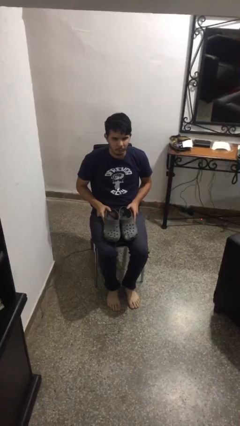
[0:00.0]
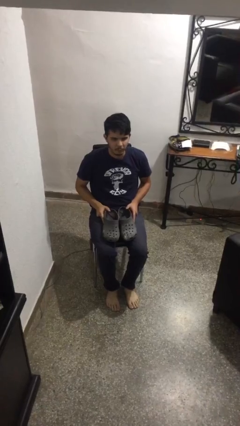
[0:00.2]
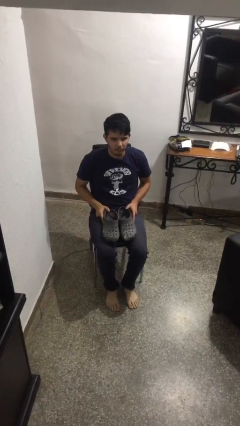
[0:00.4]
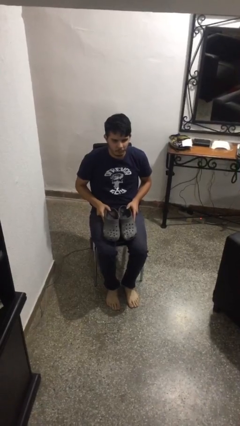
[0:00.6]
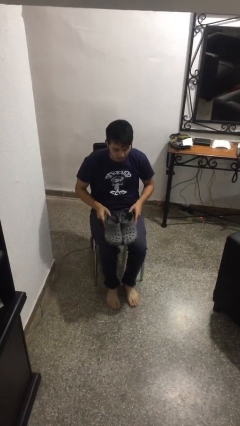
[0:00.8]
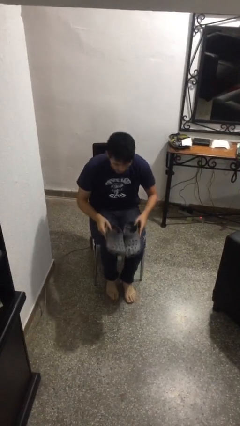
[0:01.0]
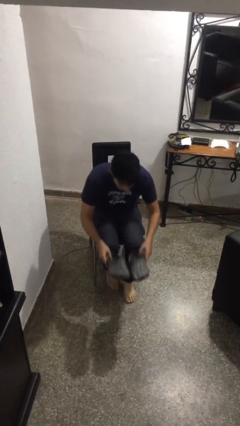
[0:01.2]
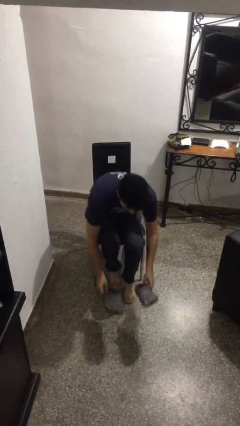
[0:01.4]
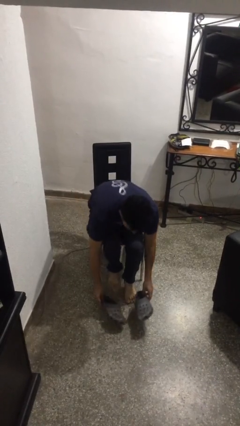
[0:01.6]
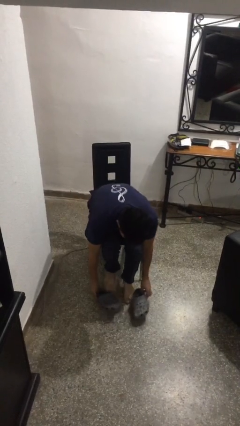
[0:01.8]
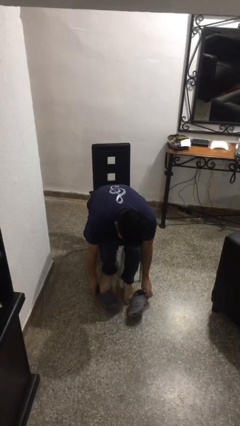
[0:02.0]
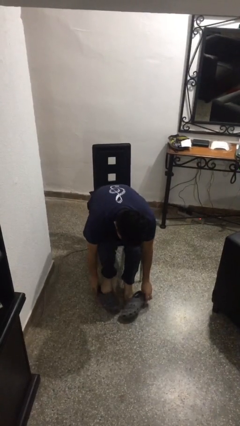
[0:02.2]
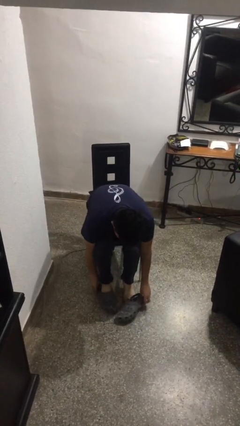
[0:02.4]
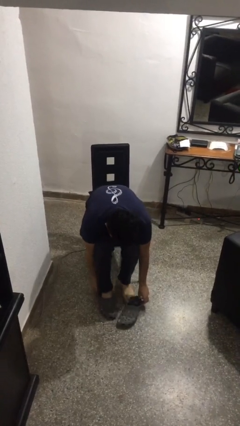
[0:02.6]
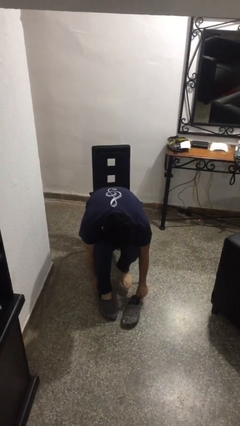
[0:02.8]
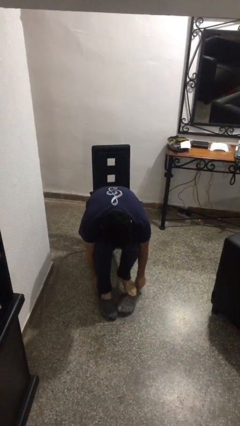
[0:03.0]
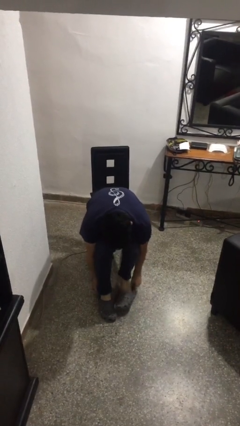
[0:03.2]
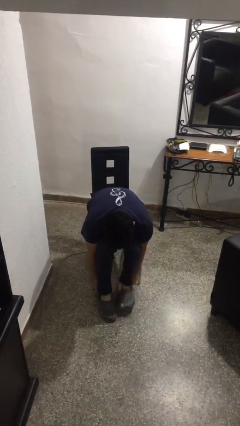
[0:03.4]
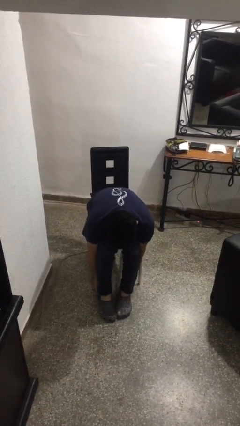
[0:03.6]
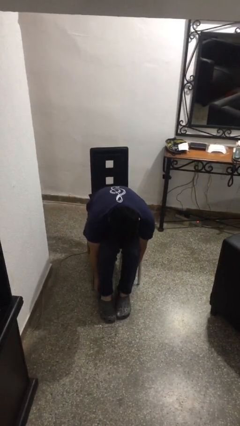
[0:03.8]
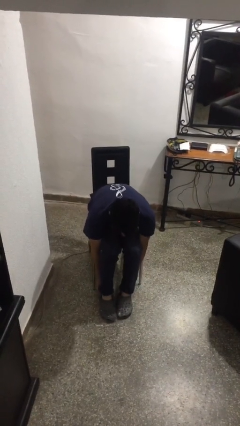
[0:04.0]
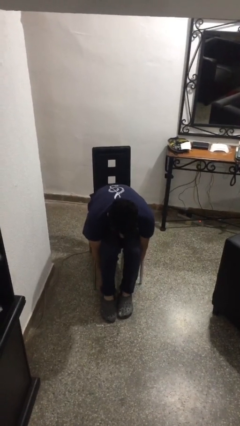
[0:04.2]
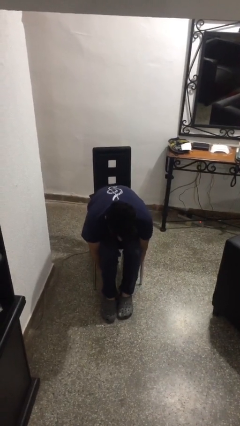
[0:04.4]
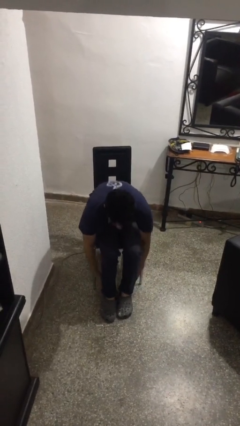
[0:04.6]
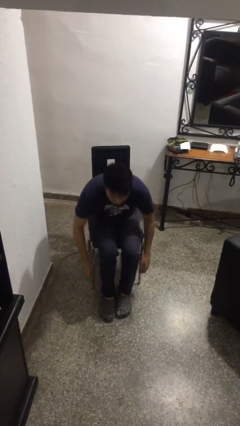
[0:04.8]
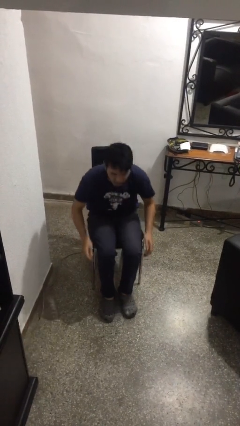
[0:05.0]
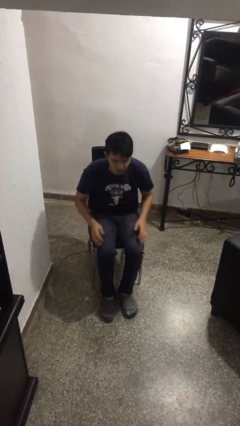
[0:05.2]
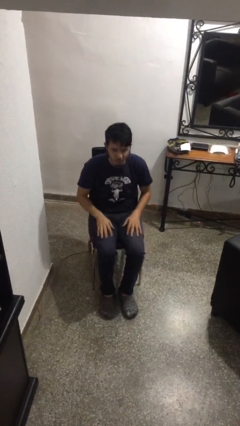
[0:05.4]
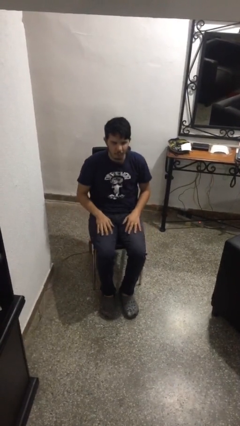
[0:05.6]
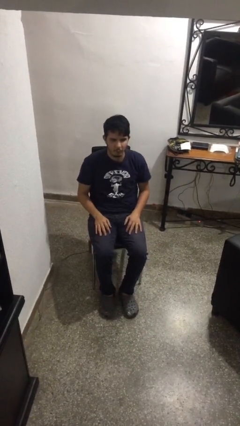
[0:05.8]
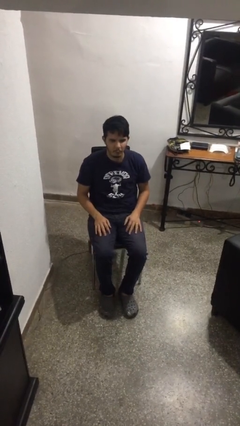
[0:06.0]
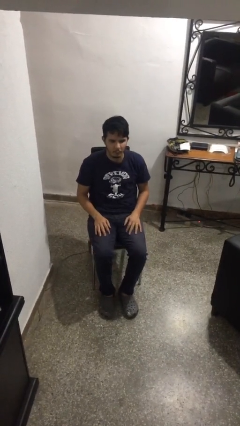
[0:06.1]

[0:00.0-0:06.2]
person puts on shoes

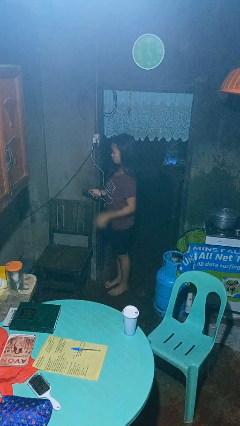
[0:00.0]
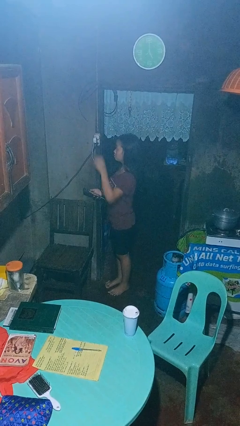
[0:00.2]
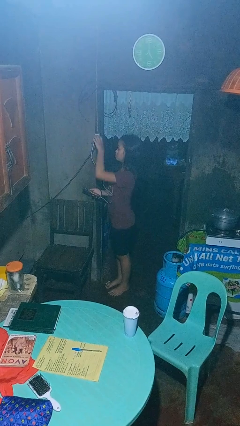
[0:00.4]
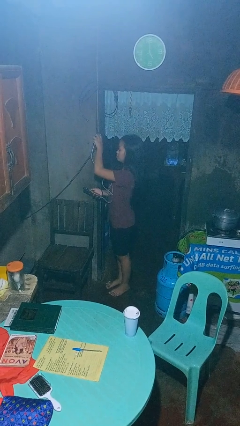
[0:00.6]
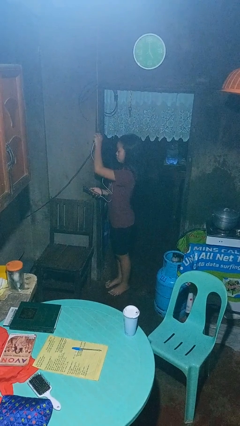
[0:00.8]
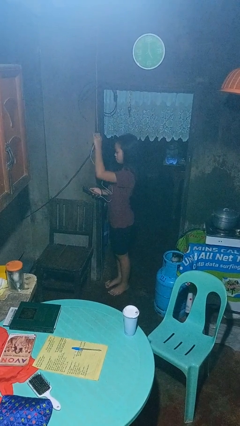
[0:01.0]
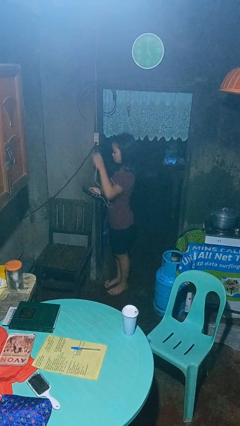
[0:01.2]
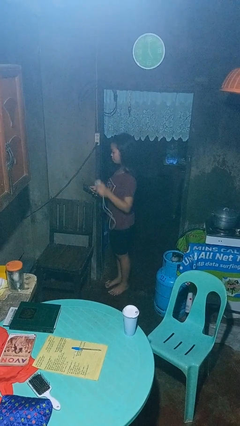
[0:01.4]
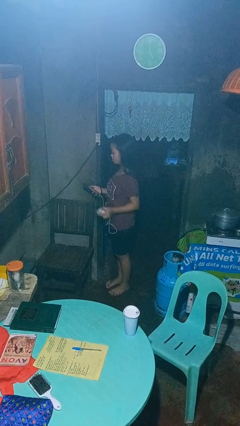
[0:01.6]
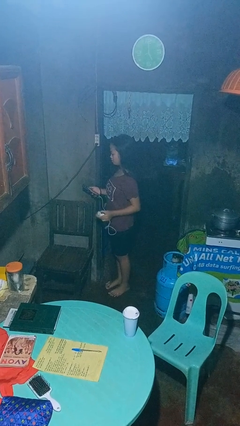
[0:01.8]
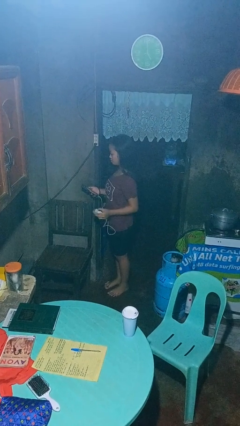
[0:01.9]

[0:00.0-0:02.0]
person unplugs from electrical socket

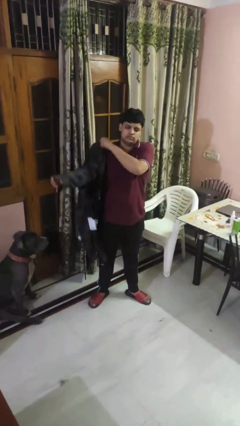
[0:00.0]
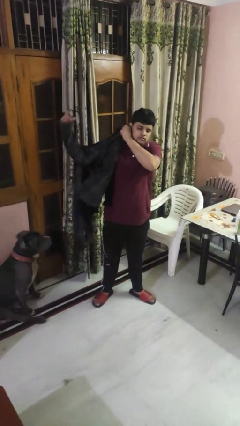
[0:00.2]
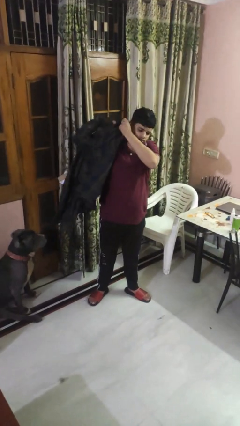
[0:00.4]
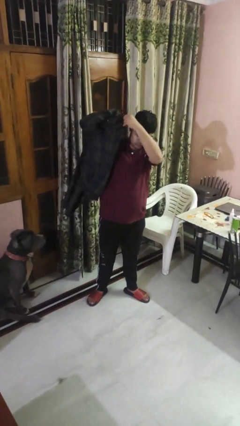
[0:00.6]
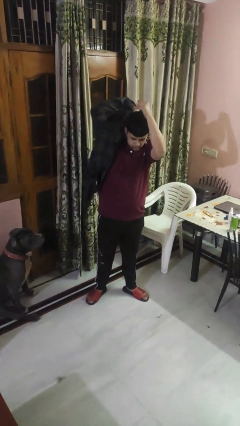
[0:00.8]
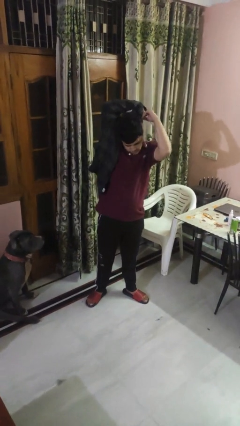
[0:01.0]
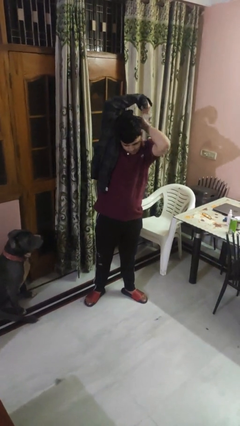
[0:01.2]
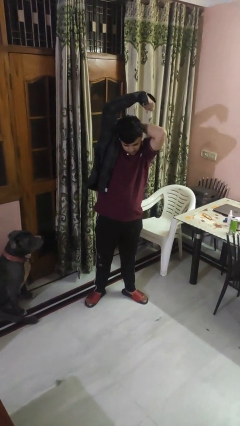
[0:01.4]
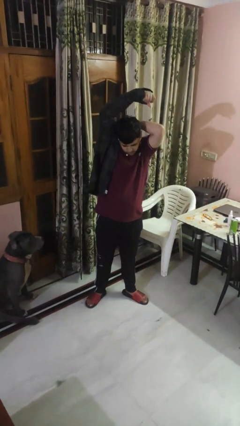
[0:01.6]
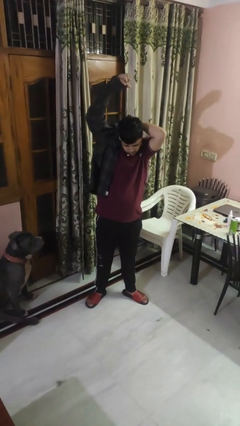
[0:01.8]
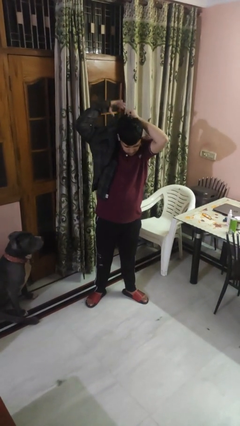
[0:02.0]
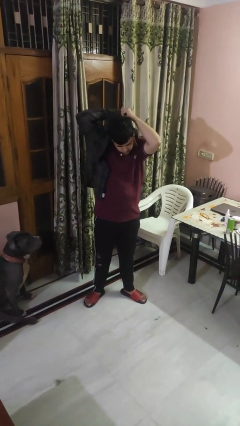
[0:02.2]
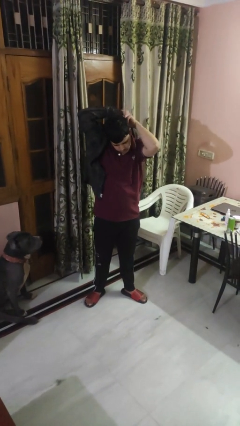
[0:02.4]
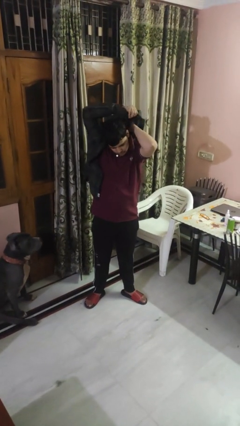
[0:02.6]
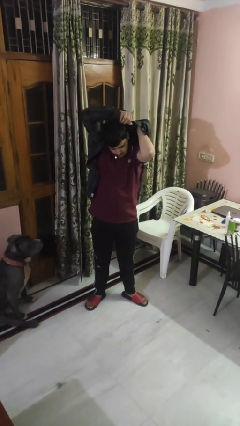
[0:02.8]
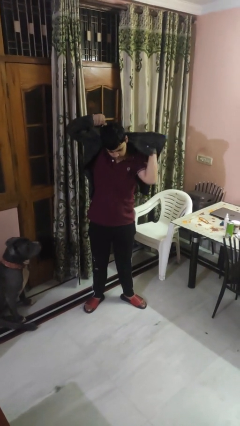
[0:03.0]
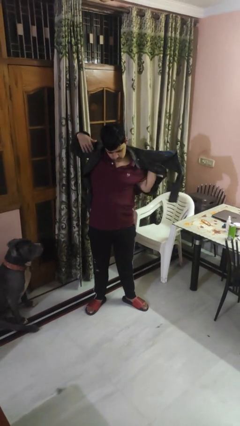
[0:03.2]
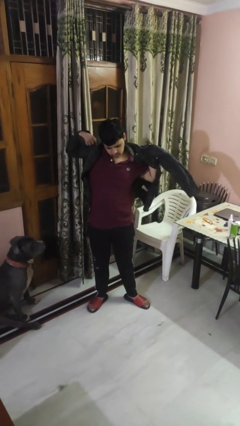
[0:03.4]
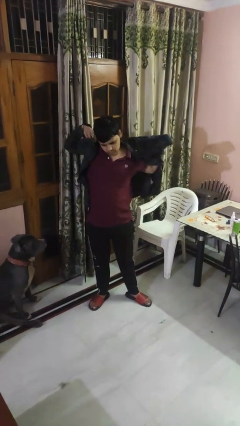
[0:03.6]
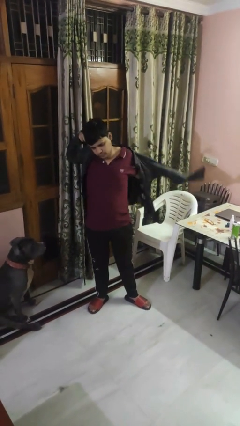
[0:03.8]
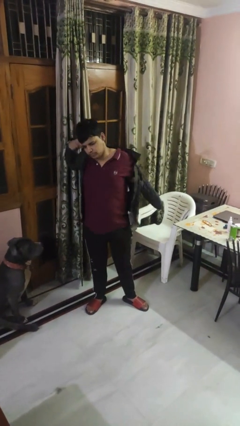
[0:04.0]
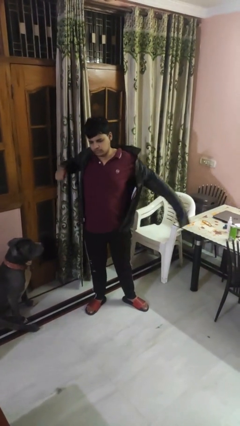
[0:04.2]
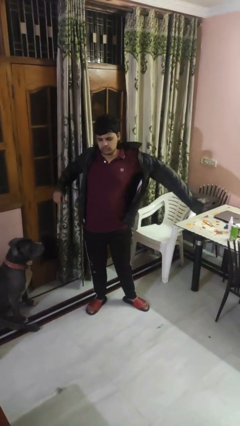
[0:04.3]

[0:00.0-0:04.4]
person puts on shirt

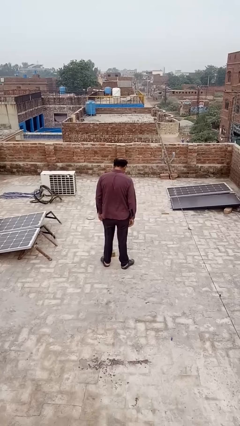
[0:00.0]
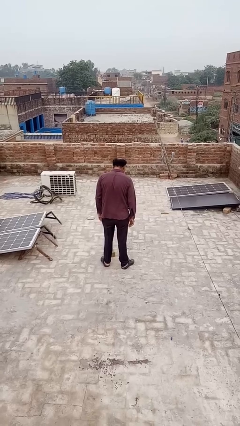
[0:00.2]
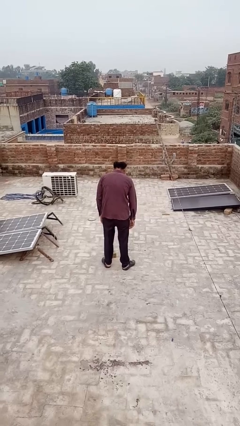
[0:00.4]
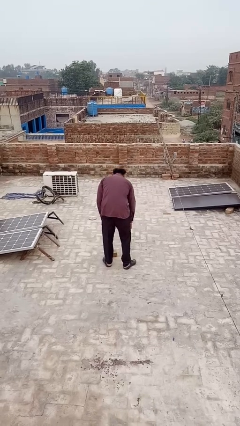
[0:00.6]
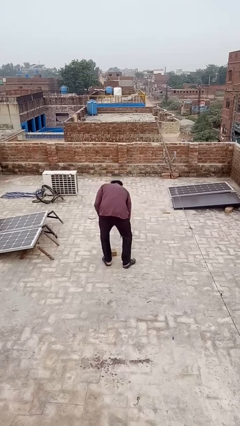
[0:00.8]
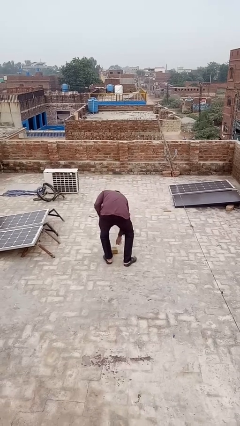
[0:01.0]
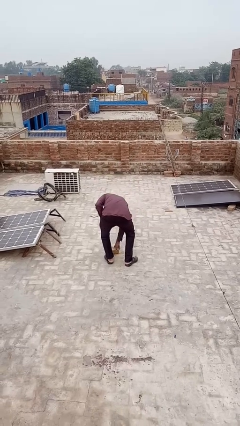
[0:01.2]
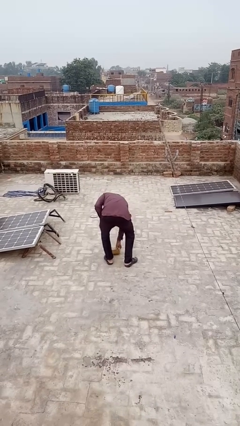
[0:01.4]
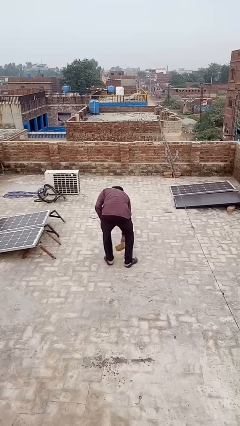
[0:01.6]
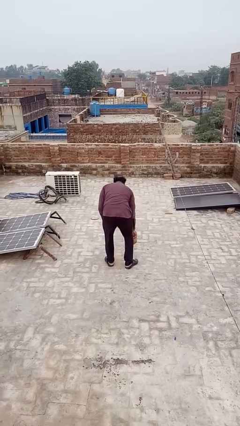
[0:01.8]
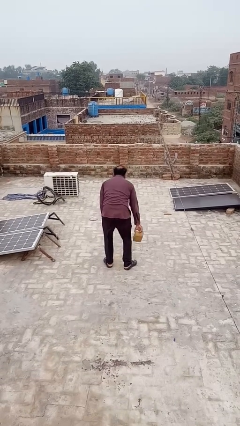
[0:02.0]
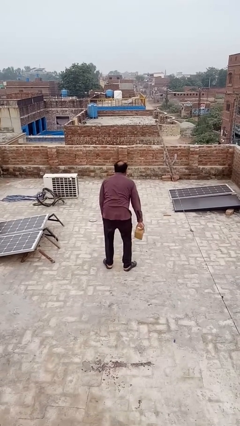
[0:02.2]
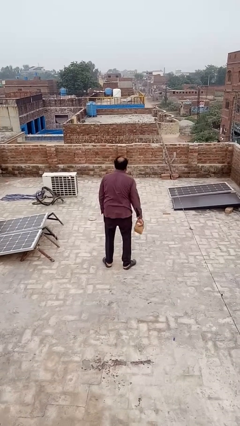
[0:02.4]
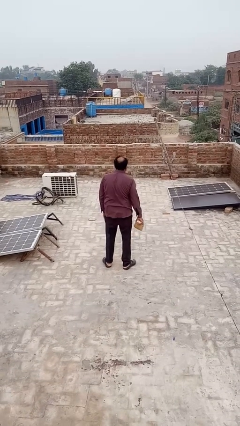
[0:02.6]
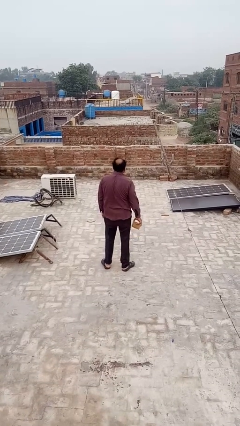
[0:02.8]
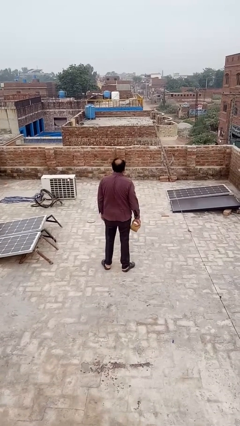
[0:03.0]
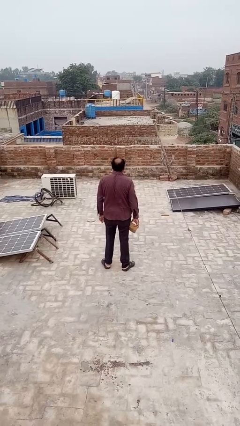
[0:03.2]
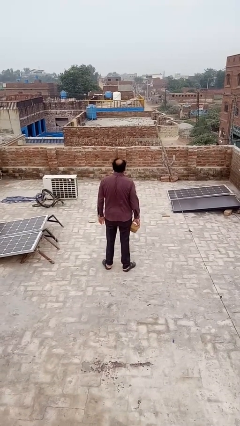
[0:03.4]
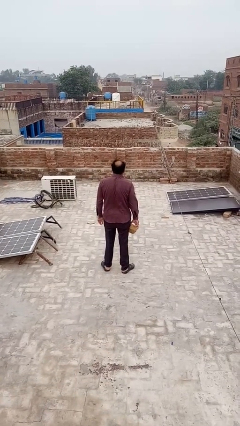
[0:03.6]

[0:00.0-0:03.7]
person picks up object from floor

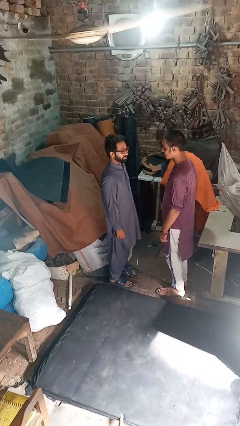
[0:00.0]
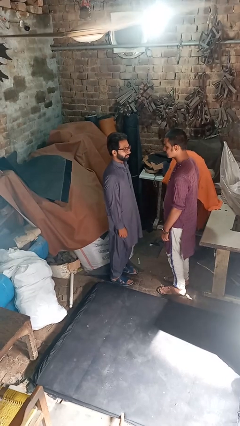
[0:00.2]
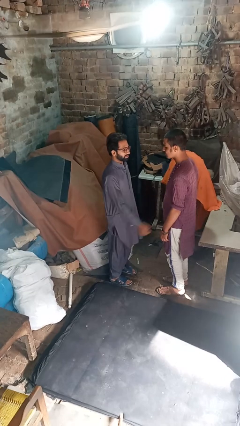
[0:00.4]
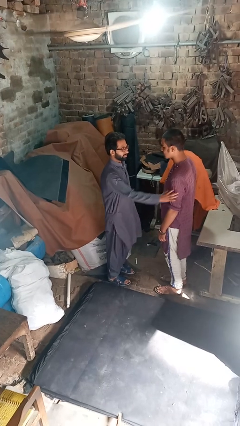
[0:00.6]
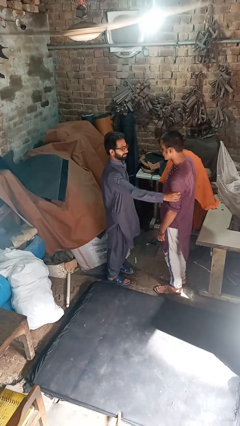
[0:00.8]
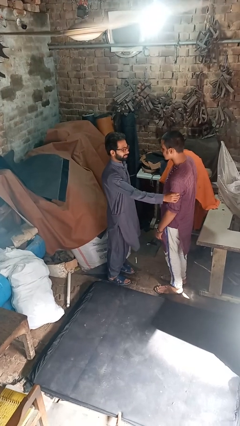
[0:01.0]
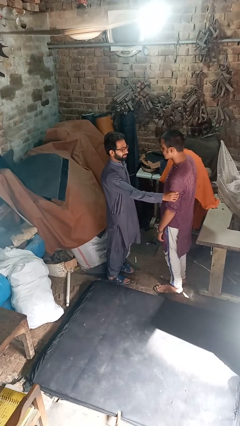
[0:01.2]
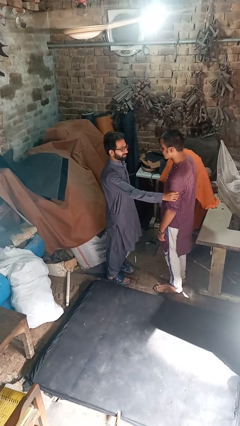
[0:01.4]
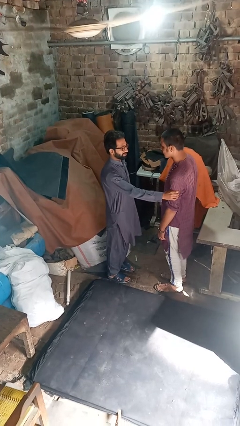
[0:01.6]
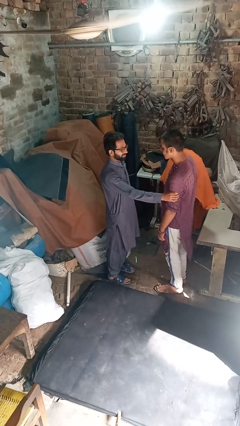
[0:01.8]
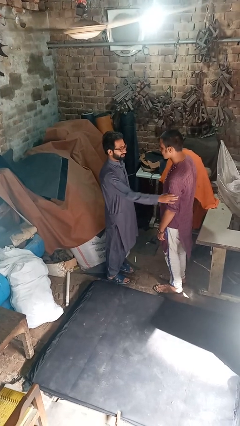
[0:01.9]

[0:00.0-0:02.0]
person grabs person by forearm
